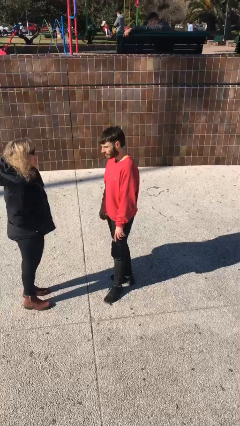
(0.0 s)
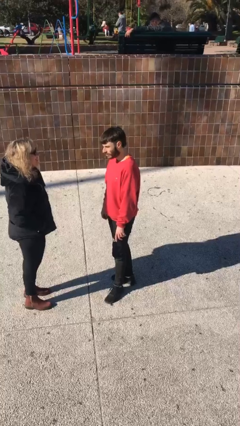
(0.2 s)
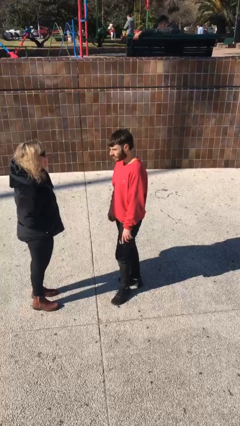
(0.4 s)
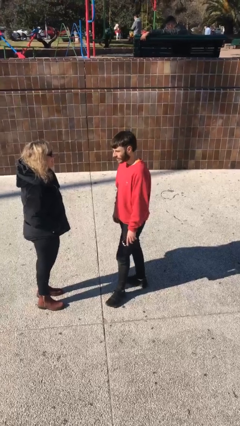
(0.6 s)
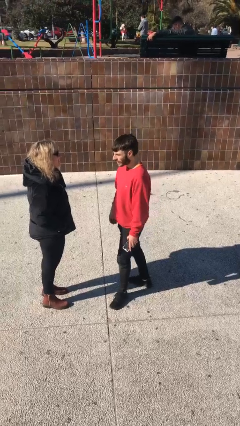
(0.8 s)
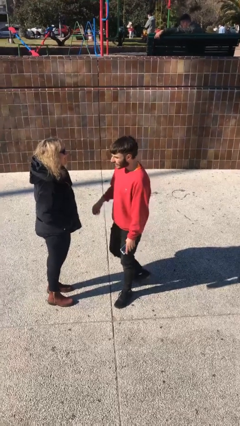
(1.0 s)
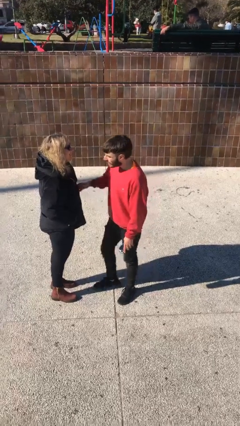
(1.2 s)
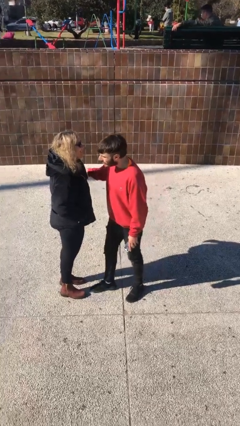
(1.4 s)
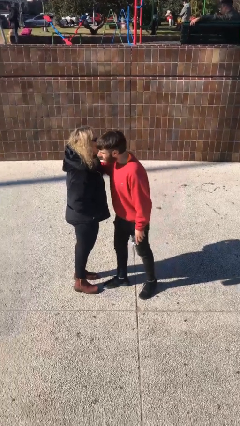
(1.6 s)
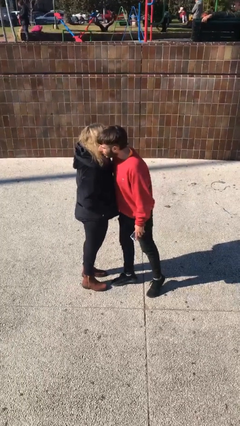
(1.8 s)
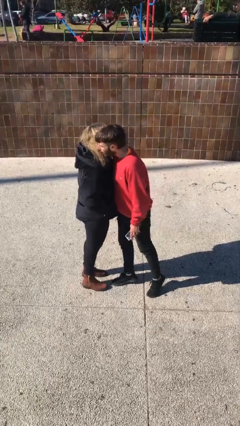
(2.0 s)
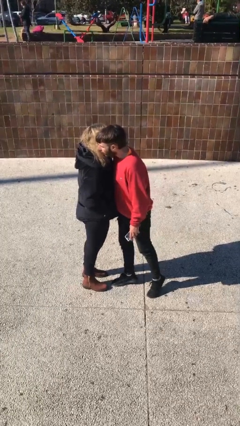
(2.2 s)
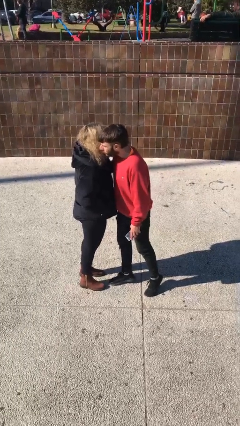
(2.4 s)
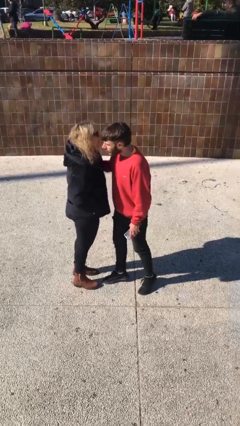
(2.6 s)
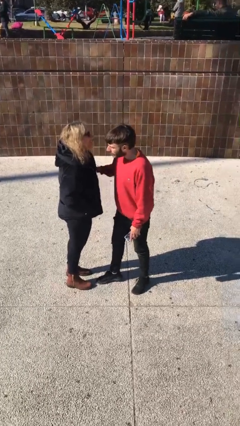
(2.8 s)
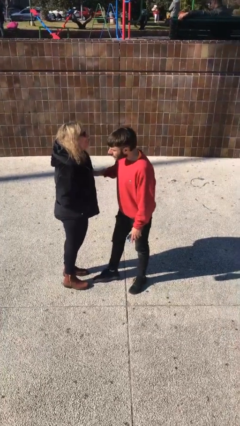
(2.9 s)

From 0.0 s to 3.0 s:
person kisses cheek of person

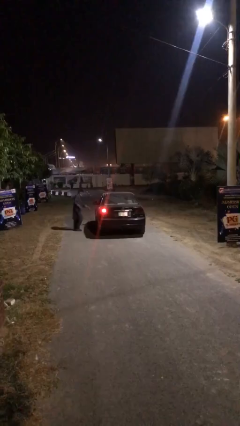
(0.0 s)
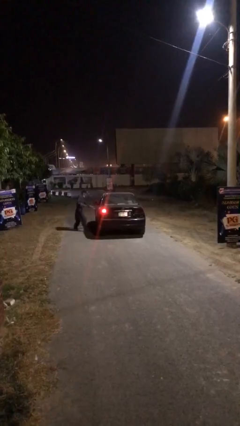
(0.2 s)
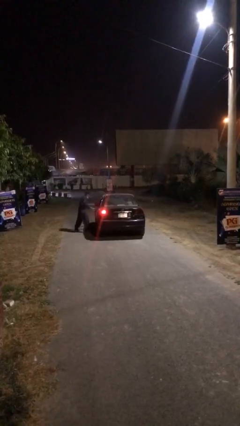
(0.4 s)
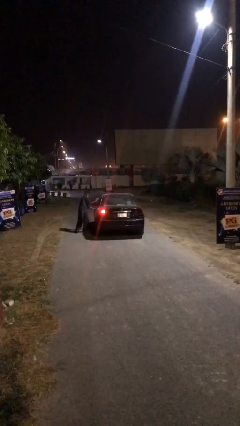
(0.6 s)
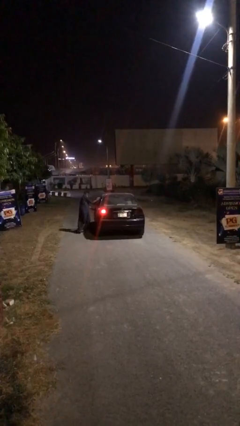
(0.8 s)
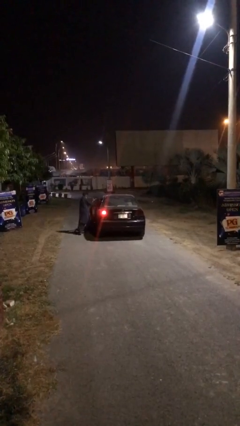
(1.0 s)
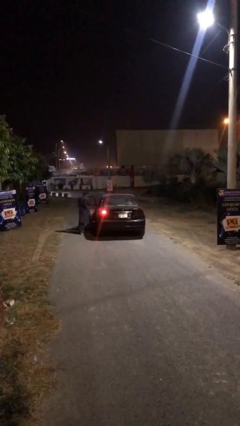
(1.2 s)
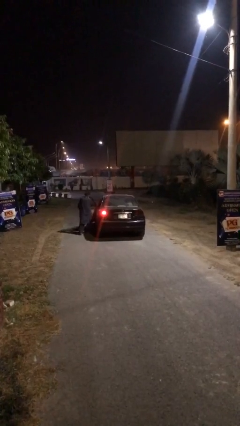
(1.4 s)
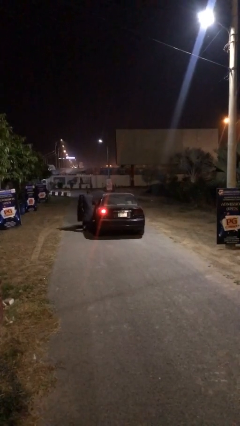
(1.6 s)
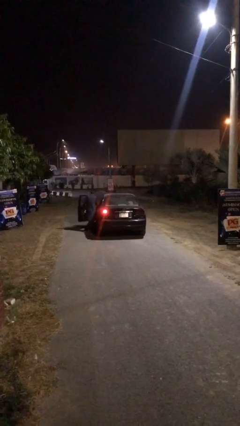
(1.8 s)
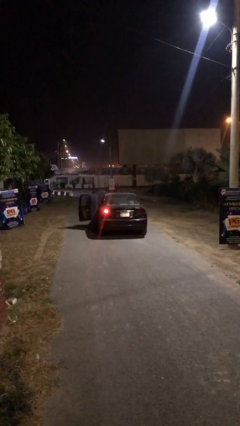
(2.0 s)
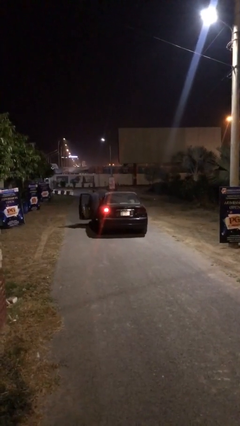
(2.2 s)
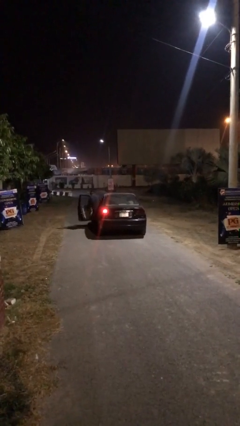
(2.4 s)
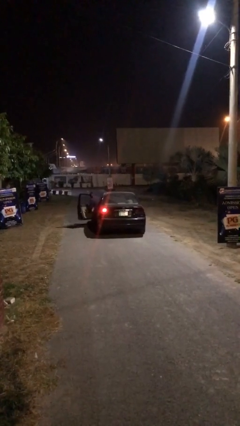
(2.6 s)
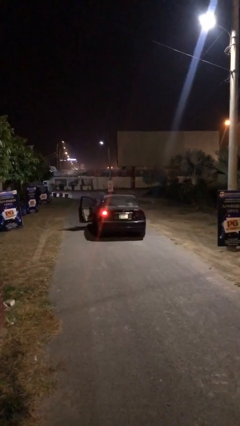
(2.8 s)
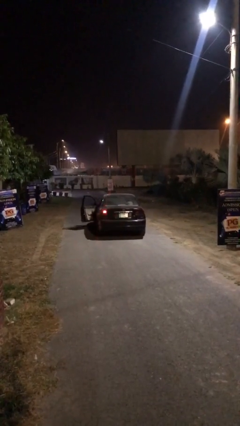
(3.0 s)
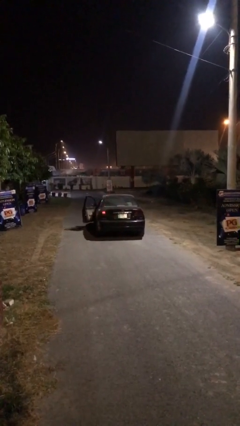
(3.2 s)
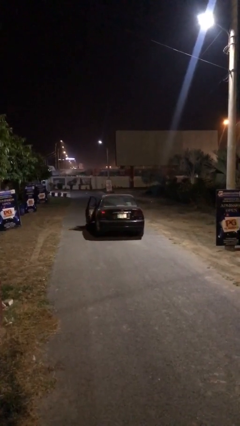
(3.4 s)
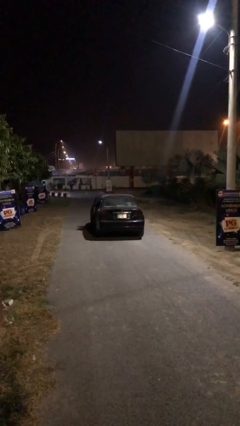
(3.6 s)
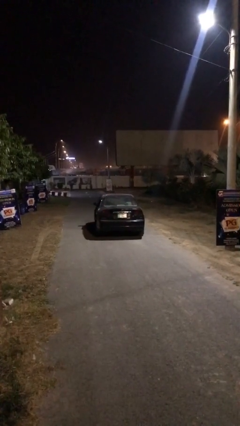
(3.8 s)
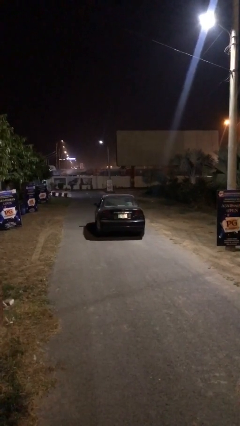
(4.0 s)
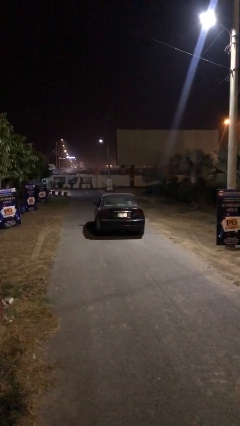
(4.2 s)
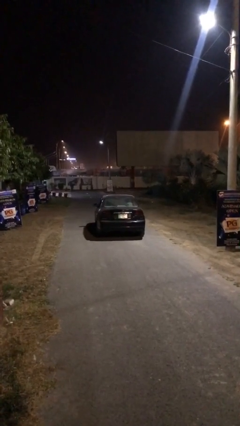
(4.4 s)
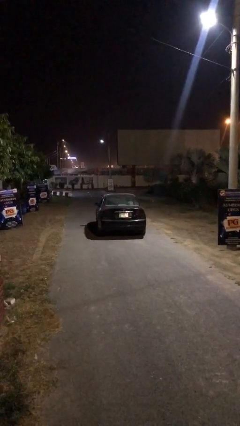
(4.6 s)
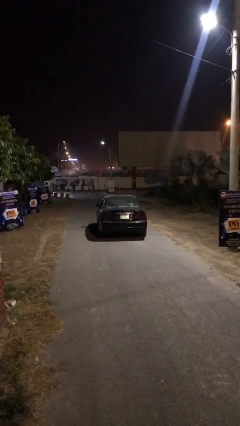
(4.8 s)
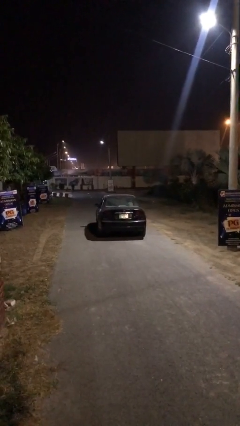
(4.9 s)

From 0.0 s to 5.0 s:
car picks up person

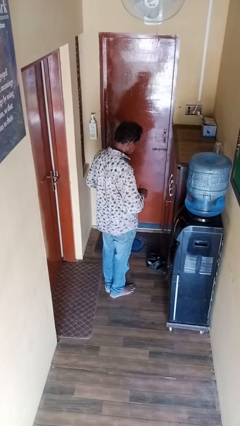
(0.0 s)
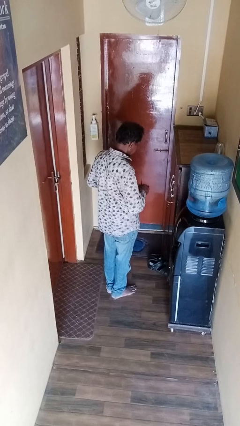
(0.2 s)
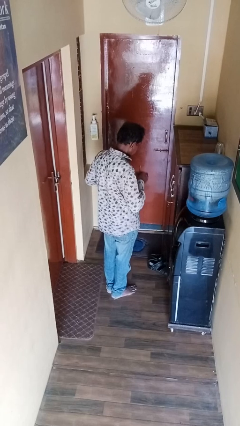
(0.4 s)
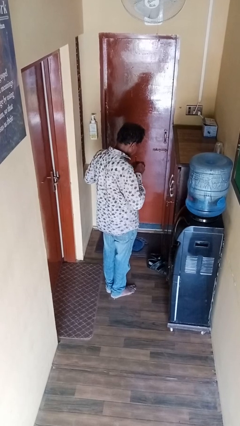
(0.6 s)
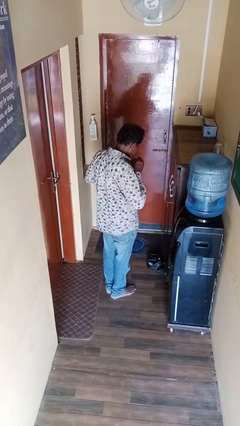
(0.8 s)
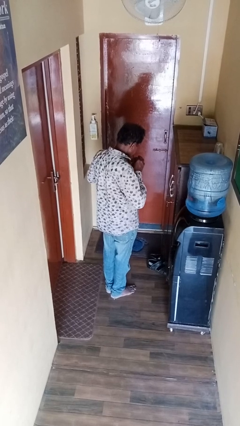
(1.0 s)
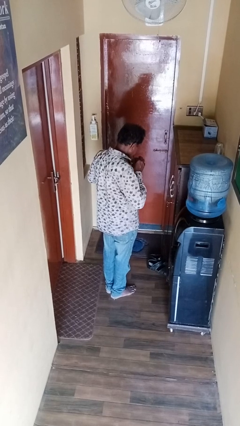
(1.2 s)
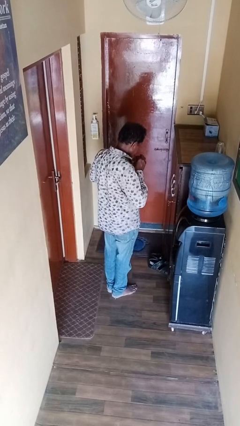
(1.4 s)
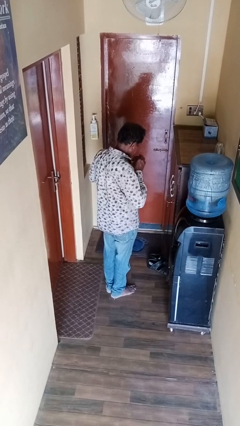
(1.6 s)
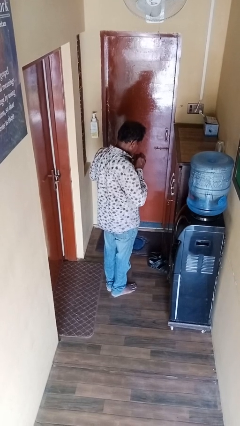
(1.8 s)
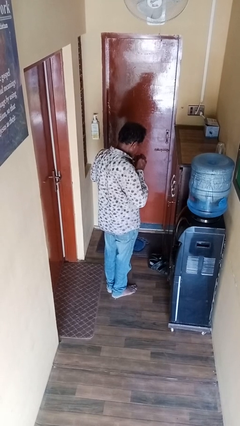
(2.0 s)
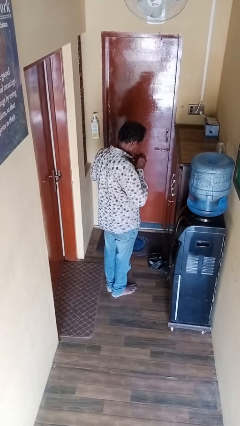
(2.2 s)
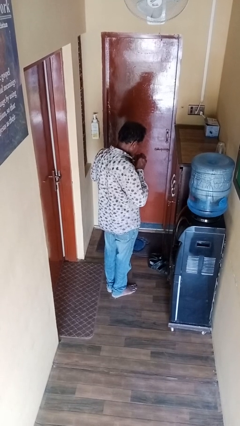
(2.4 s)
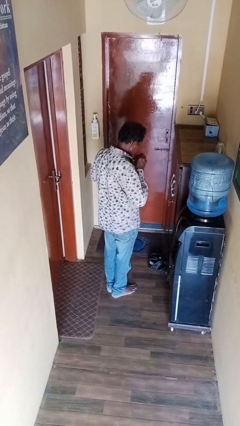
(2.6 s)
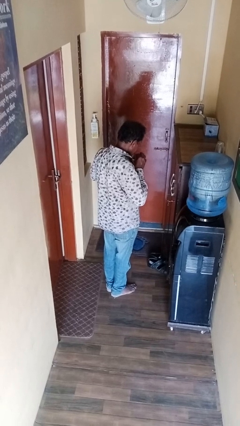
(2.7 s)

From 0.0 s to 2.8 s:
person drinks from straw

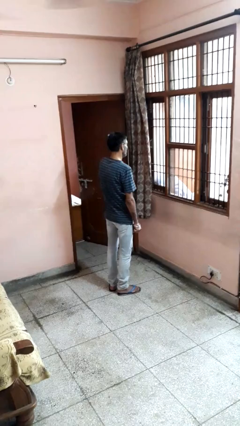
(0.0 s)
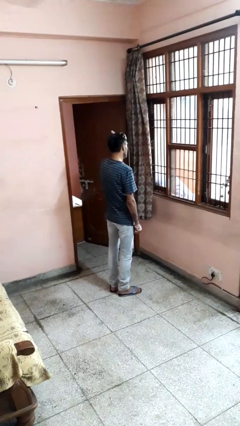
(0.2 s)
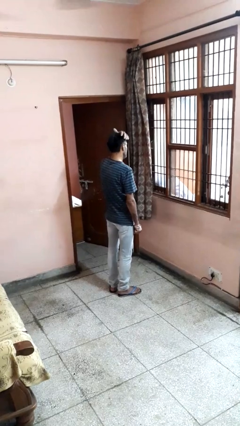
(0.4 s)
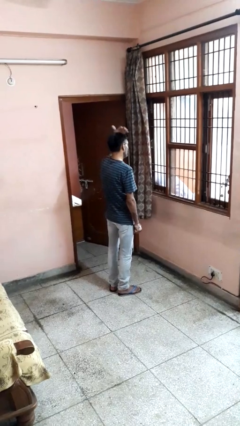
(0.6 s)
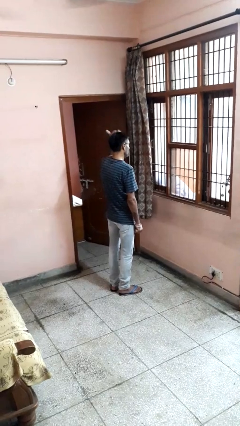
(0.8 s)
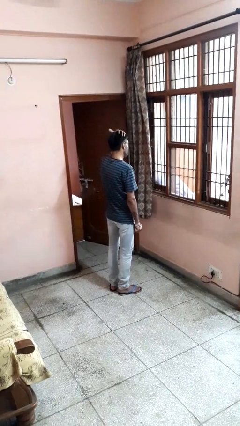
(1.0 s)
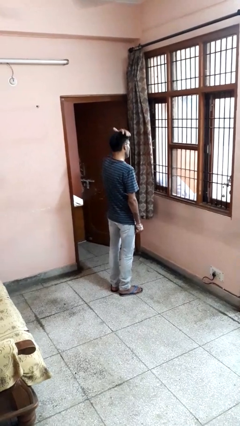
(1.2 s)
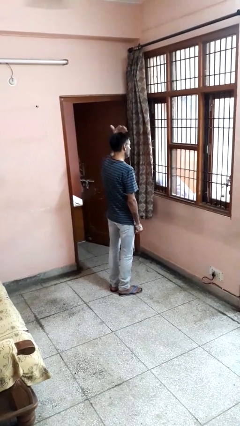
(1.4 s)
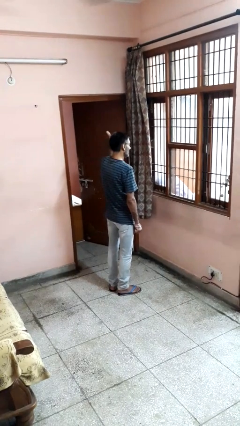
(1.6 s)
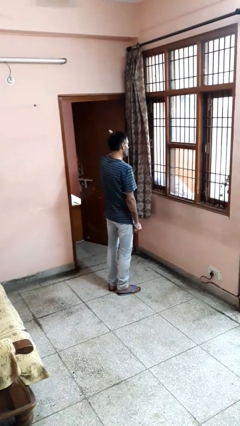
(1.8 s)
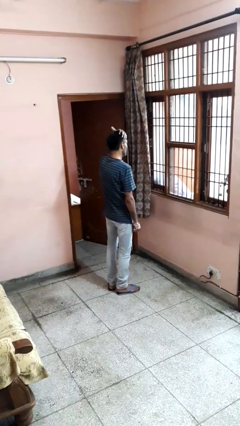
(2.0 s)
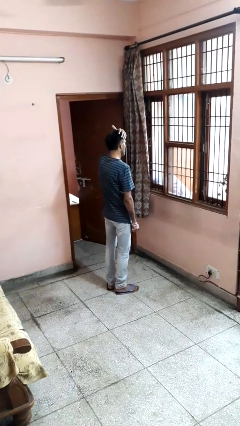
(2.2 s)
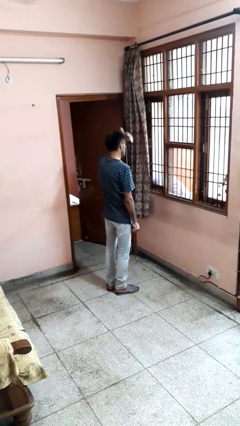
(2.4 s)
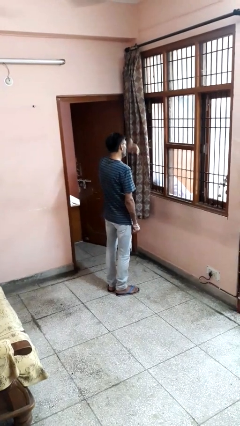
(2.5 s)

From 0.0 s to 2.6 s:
person strokes hair

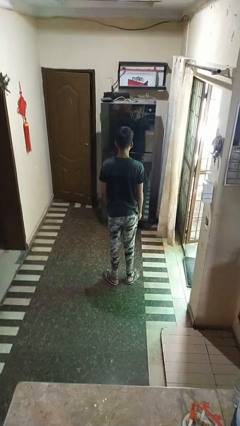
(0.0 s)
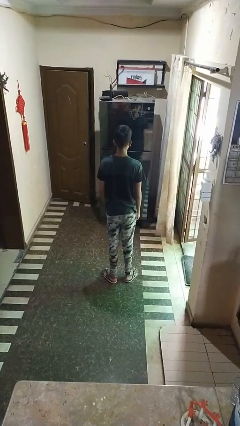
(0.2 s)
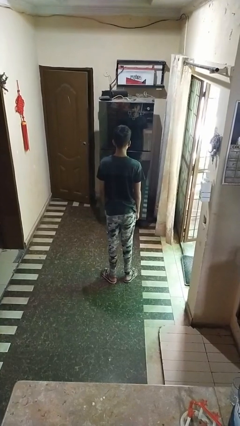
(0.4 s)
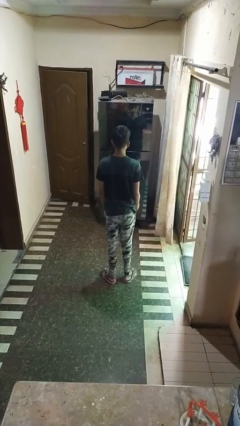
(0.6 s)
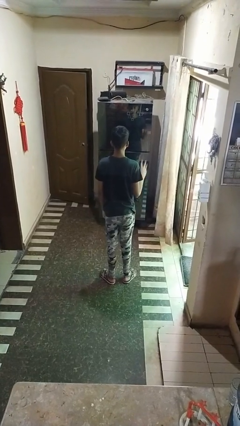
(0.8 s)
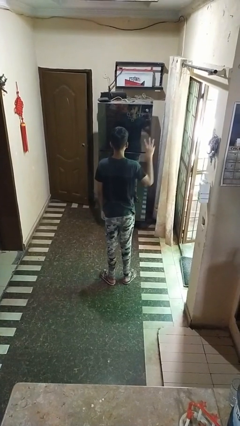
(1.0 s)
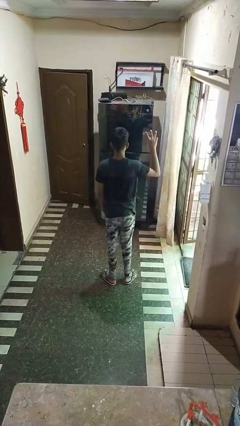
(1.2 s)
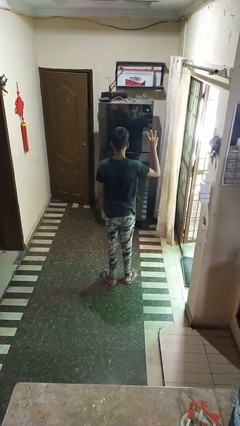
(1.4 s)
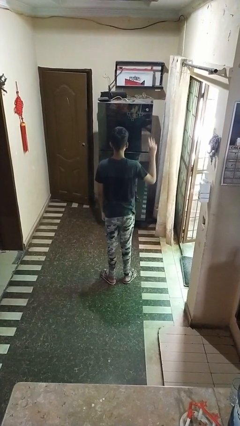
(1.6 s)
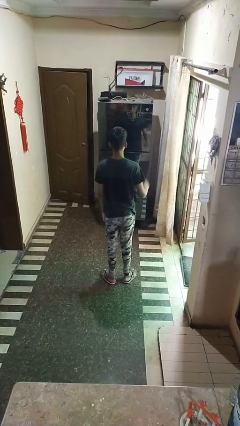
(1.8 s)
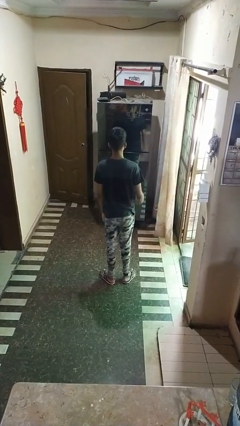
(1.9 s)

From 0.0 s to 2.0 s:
person gestures number three

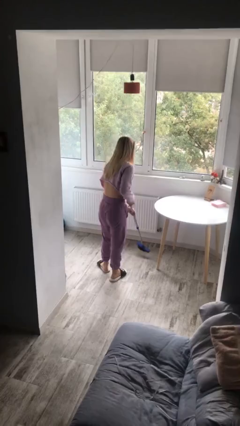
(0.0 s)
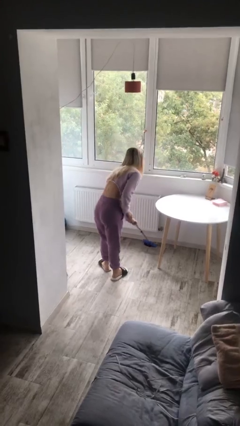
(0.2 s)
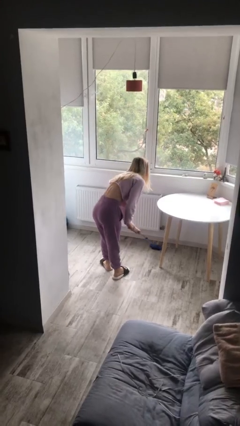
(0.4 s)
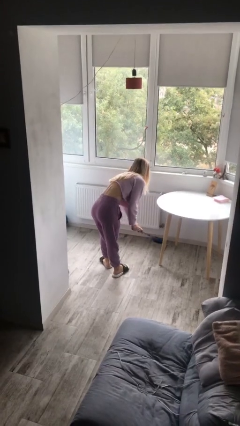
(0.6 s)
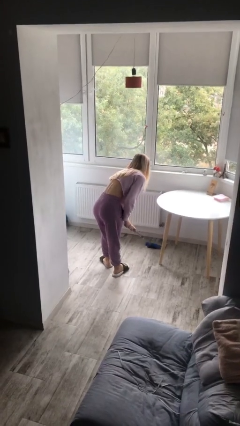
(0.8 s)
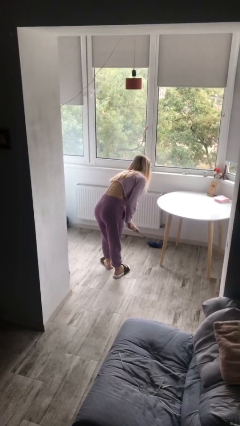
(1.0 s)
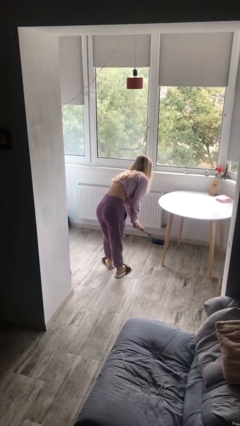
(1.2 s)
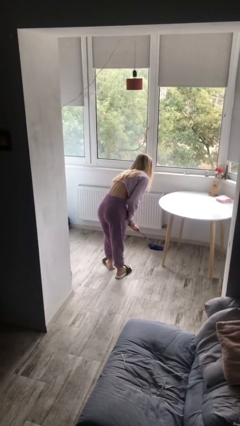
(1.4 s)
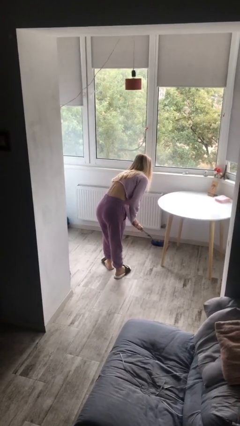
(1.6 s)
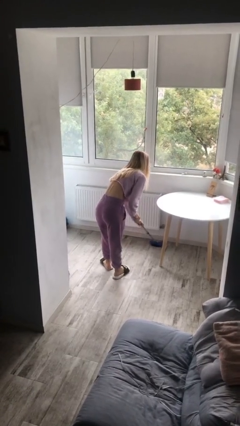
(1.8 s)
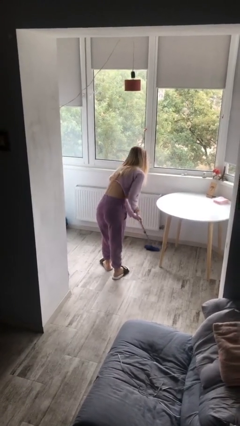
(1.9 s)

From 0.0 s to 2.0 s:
person mops

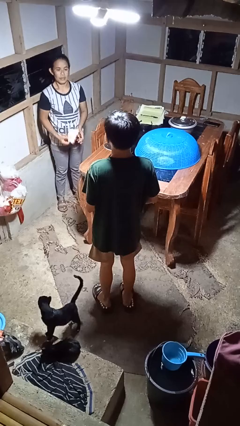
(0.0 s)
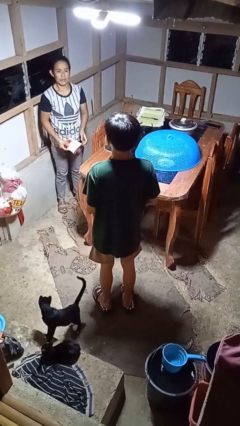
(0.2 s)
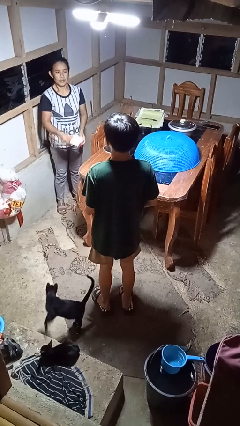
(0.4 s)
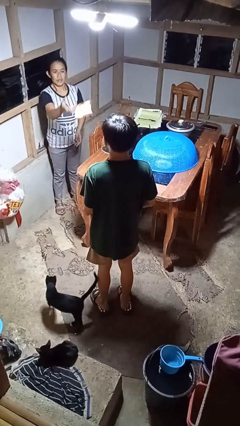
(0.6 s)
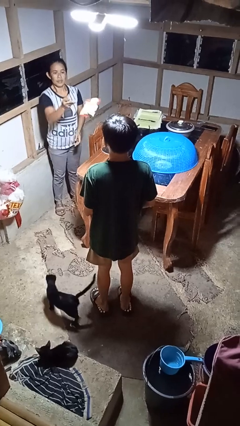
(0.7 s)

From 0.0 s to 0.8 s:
person catches object from person
